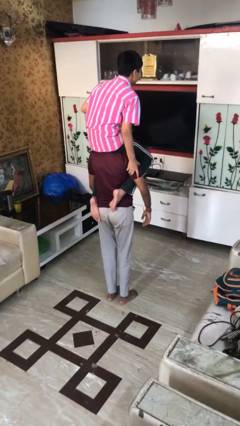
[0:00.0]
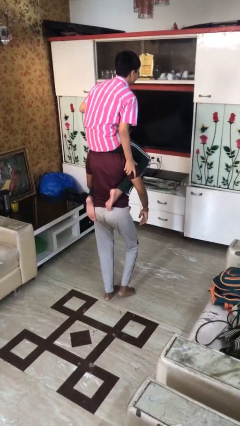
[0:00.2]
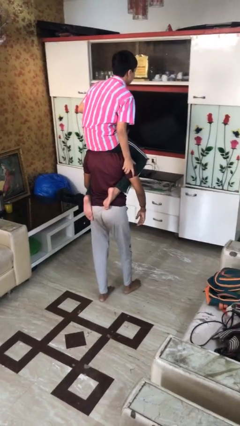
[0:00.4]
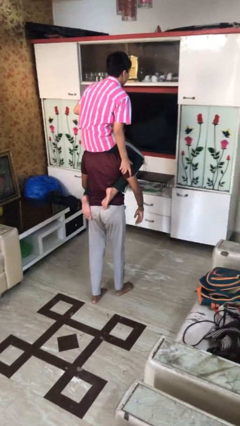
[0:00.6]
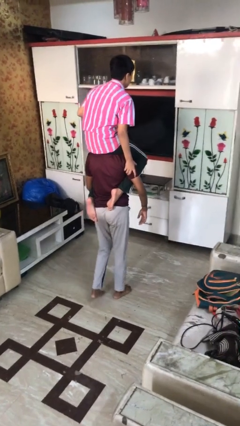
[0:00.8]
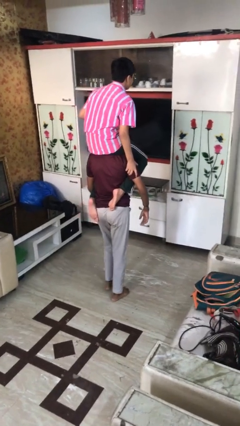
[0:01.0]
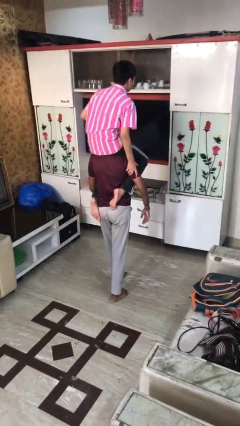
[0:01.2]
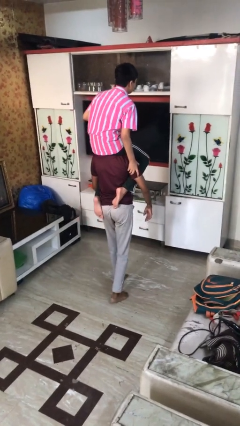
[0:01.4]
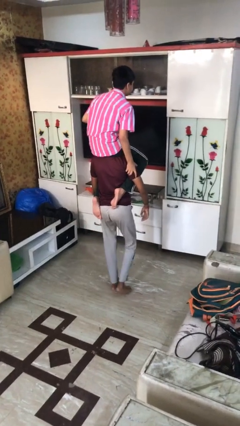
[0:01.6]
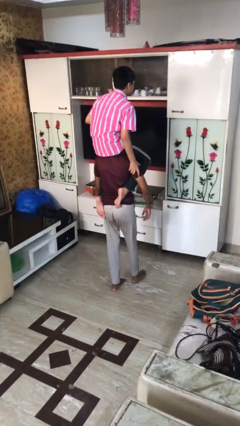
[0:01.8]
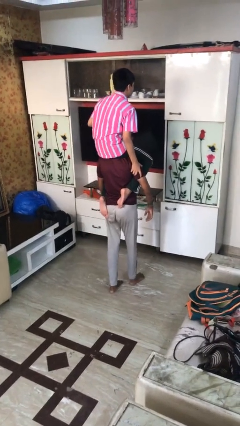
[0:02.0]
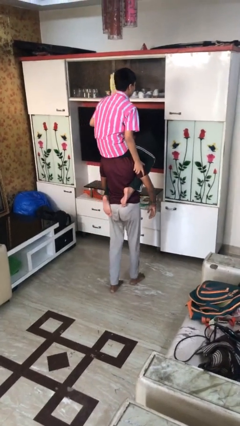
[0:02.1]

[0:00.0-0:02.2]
person carries person on shoulders

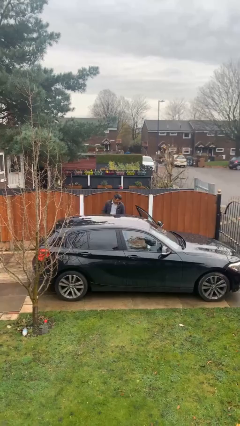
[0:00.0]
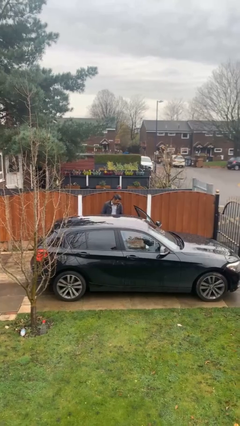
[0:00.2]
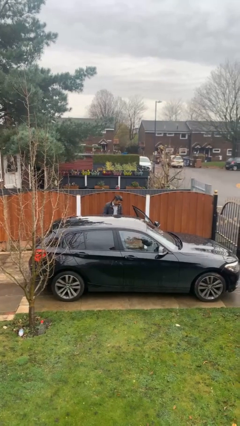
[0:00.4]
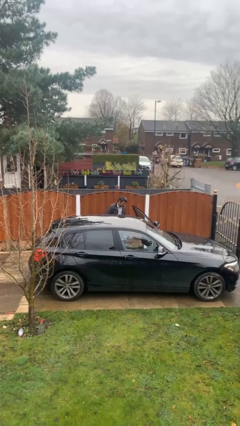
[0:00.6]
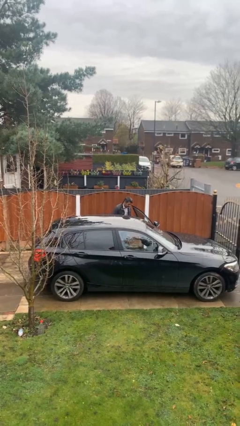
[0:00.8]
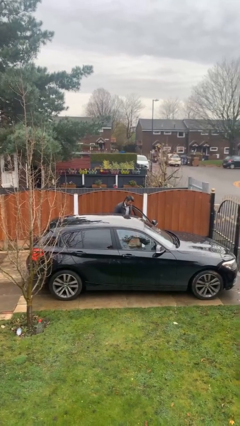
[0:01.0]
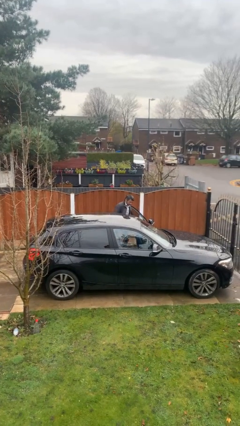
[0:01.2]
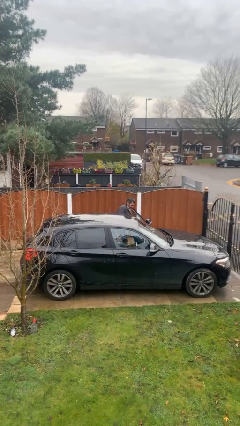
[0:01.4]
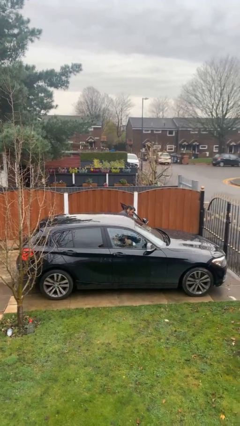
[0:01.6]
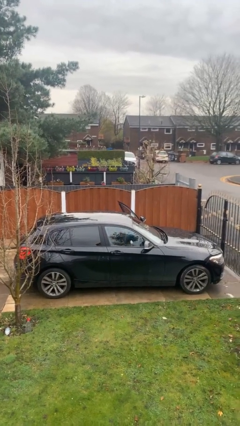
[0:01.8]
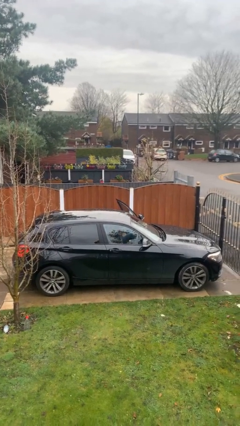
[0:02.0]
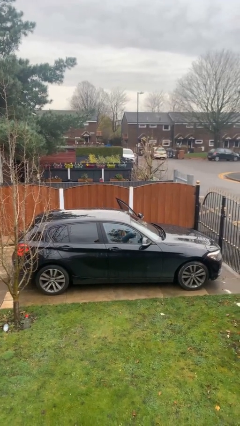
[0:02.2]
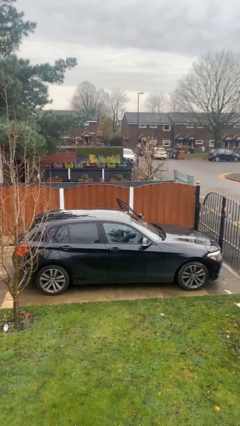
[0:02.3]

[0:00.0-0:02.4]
person enters car

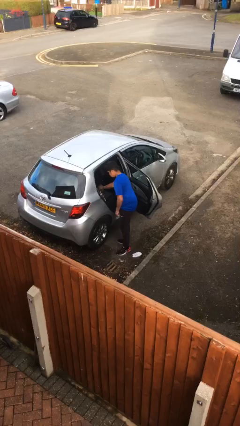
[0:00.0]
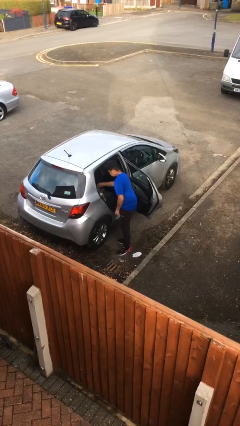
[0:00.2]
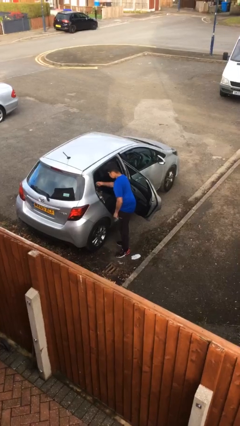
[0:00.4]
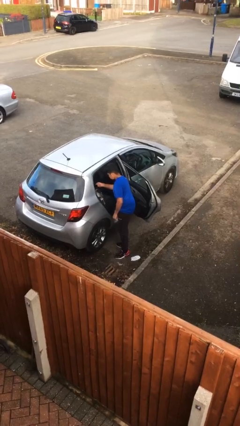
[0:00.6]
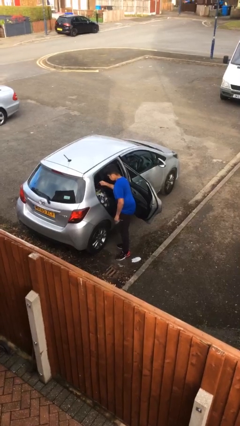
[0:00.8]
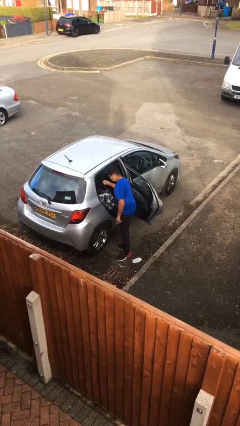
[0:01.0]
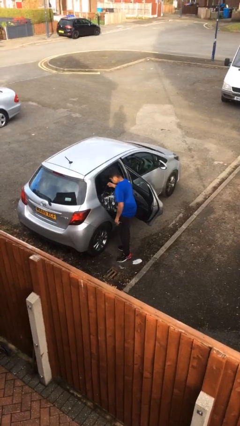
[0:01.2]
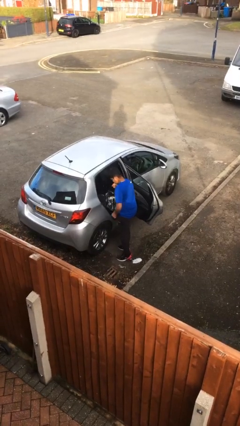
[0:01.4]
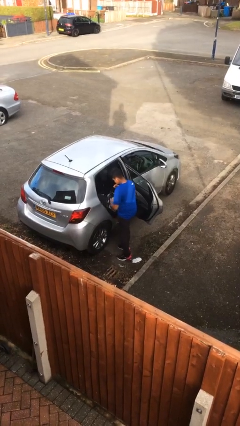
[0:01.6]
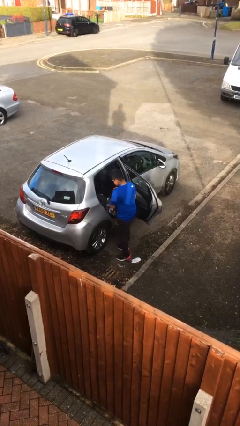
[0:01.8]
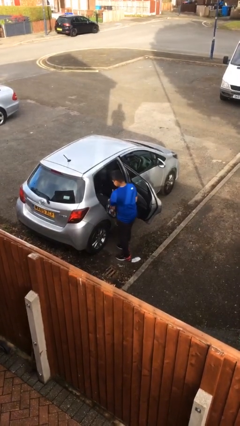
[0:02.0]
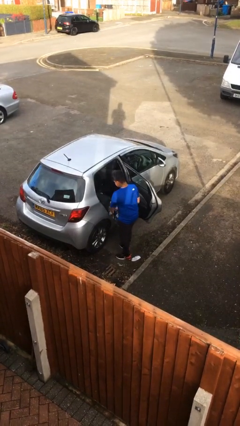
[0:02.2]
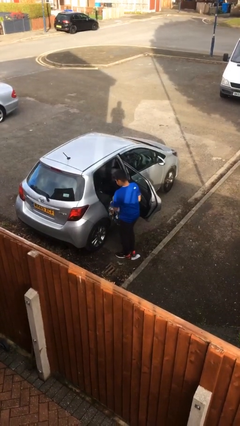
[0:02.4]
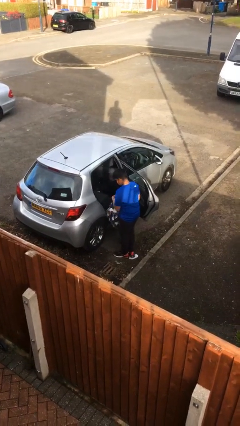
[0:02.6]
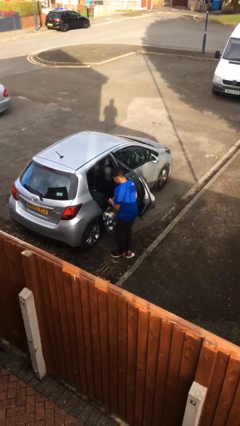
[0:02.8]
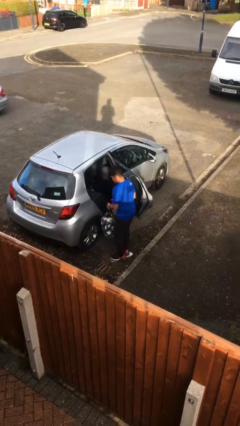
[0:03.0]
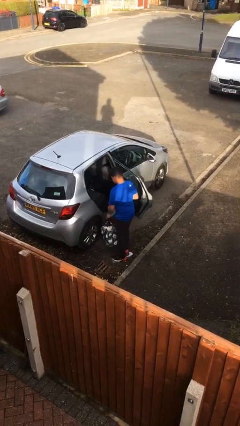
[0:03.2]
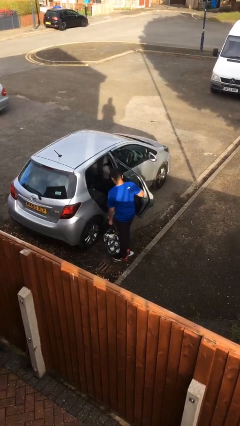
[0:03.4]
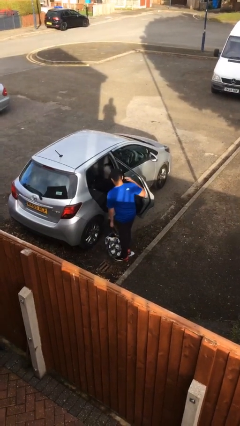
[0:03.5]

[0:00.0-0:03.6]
person unloads car

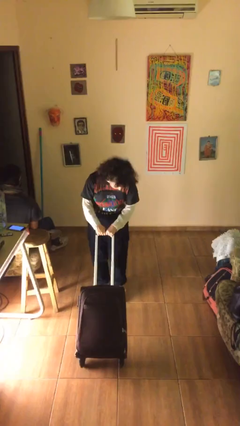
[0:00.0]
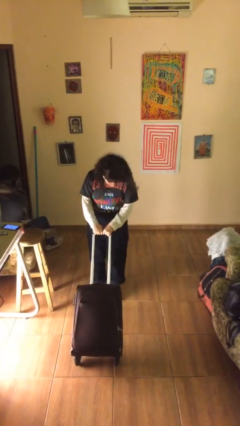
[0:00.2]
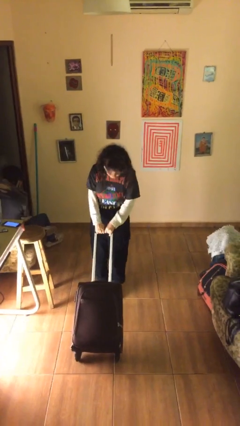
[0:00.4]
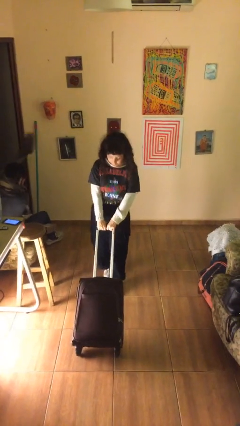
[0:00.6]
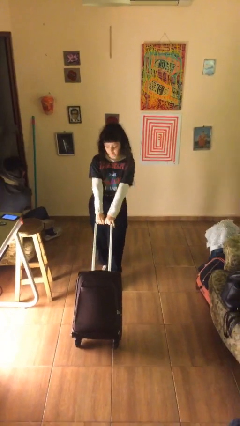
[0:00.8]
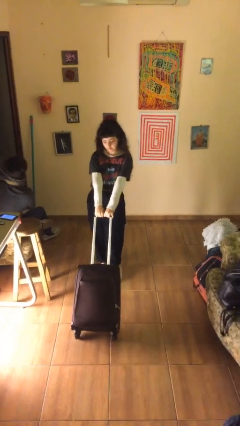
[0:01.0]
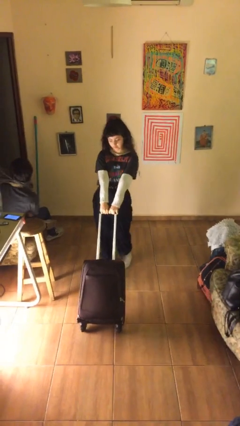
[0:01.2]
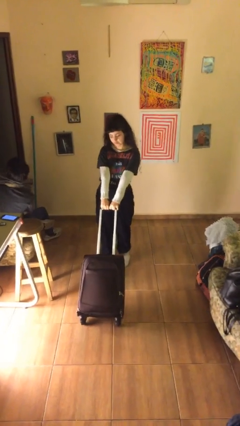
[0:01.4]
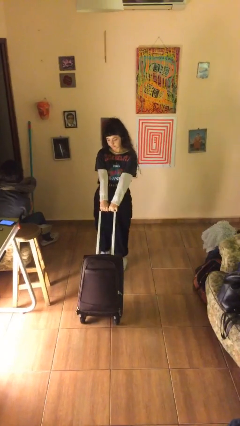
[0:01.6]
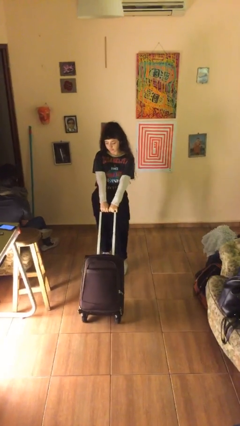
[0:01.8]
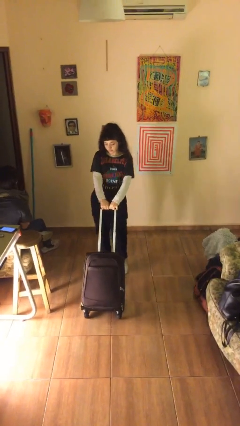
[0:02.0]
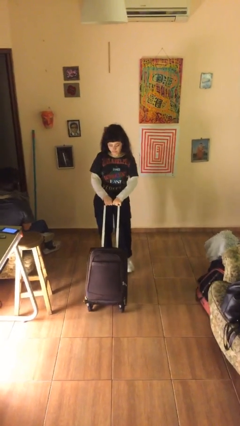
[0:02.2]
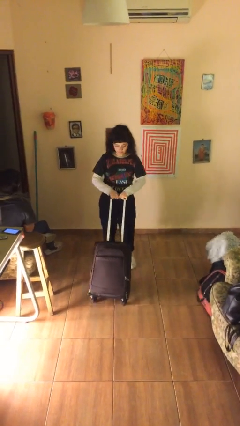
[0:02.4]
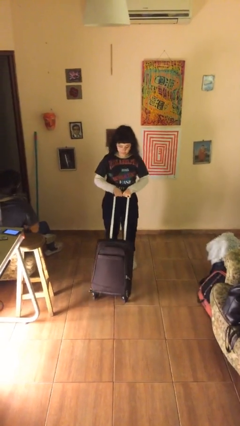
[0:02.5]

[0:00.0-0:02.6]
person pulls wheeled cart

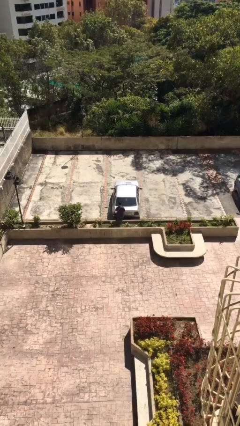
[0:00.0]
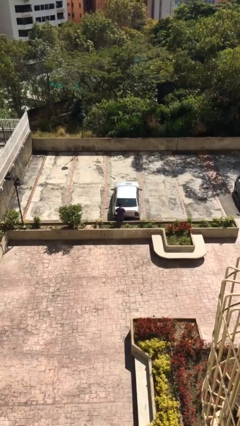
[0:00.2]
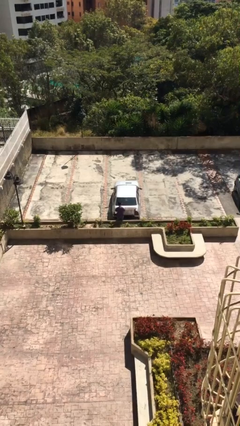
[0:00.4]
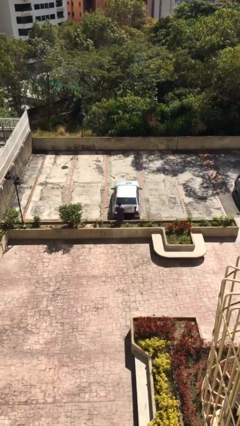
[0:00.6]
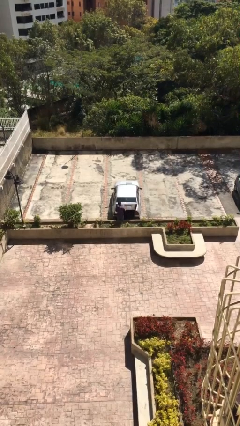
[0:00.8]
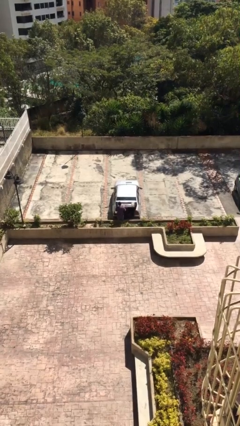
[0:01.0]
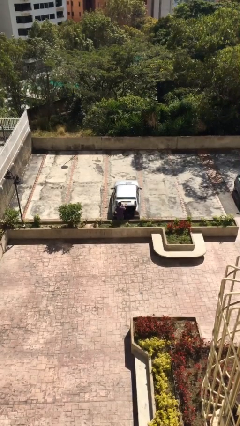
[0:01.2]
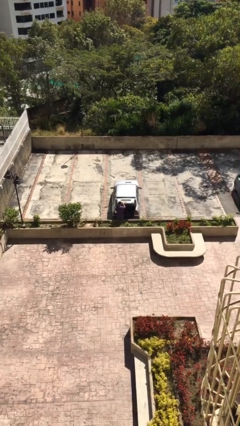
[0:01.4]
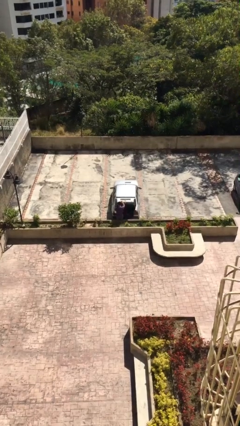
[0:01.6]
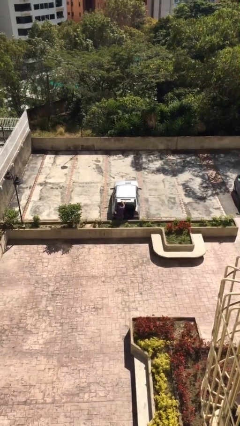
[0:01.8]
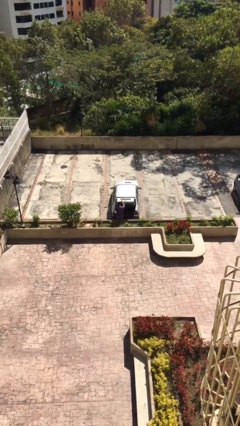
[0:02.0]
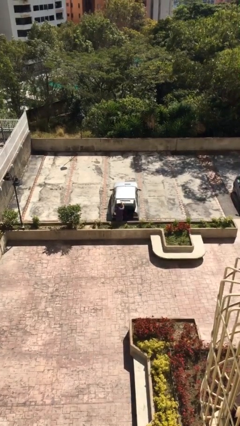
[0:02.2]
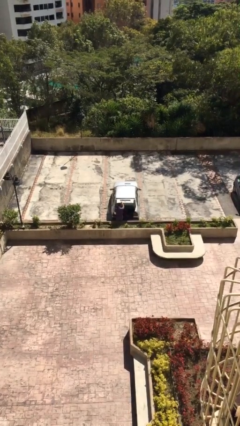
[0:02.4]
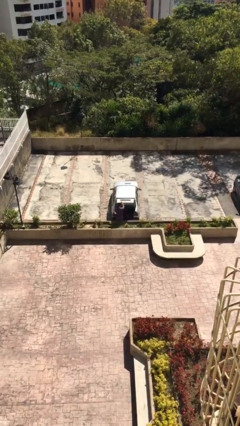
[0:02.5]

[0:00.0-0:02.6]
person opens car trunk

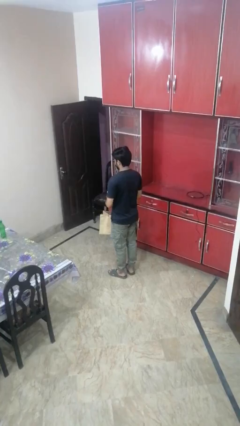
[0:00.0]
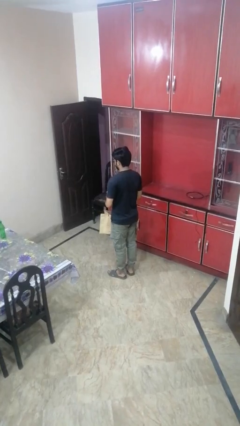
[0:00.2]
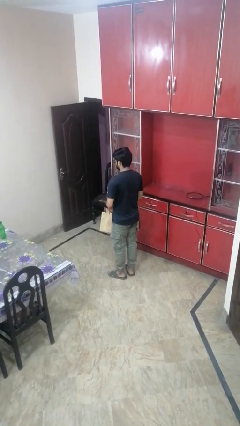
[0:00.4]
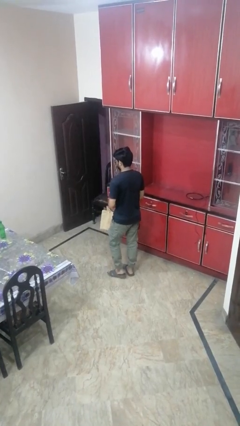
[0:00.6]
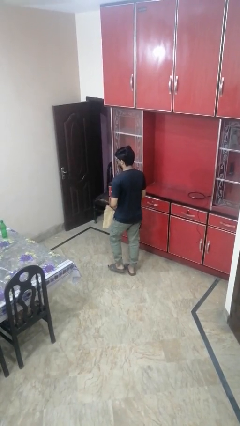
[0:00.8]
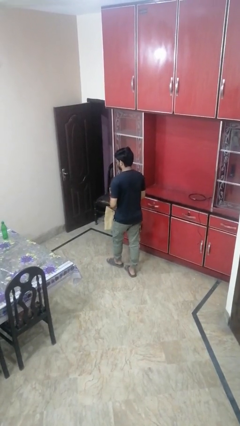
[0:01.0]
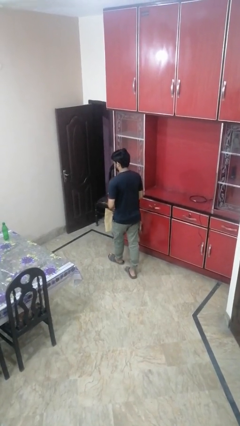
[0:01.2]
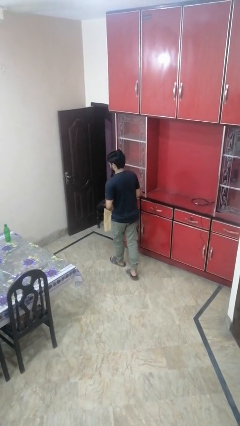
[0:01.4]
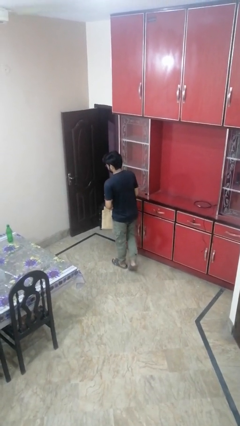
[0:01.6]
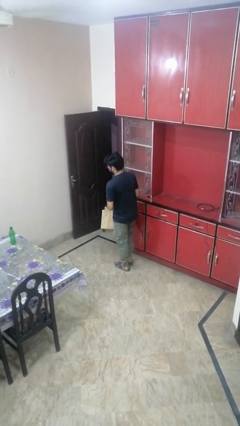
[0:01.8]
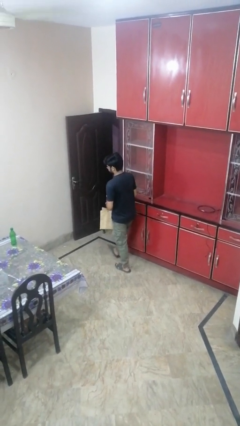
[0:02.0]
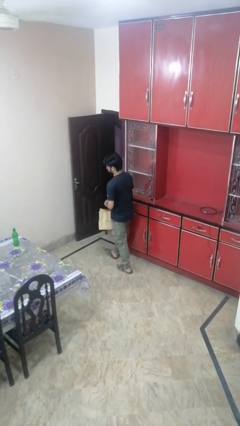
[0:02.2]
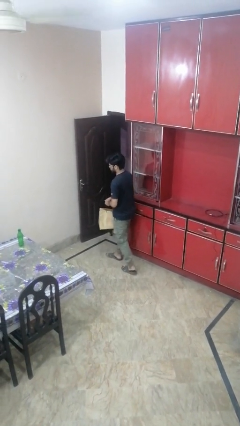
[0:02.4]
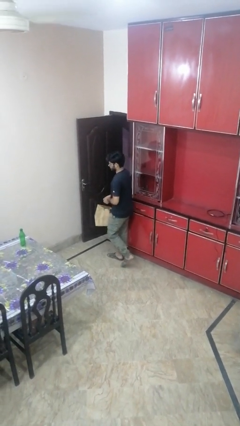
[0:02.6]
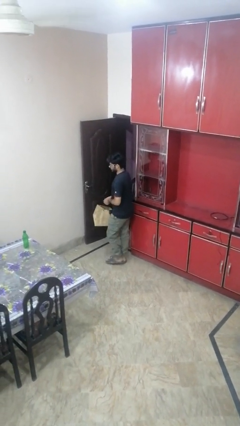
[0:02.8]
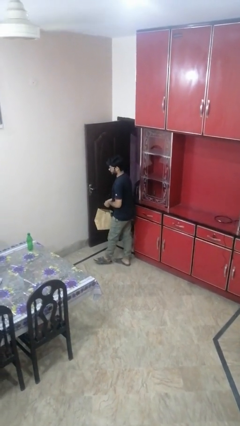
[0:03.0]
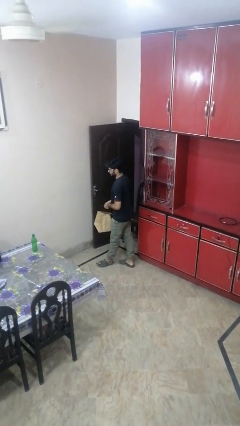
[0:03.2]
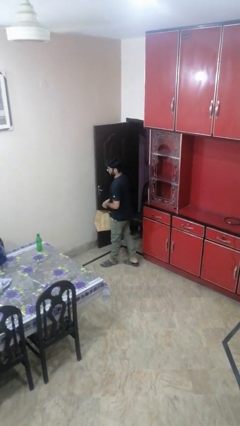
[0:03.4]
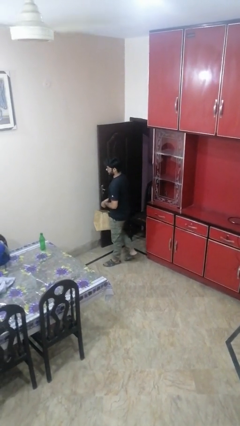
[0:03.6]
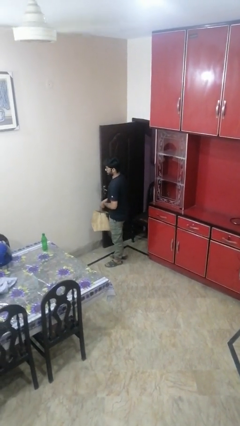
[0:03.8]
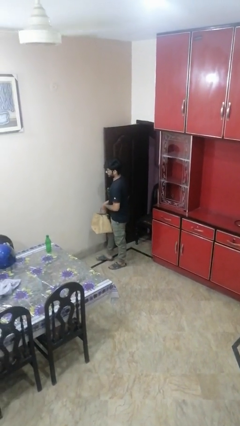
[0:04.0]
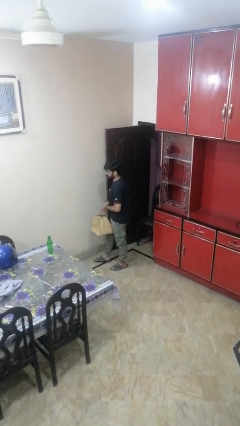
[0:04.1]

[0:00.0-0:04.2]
person carries groceries
